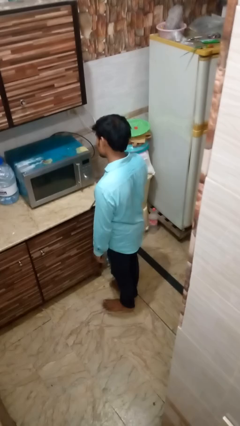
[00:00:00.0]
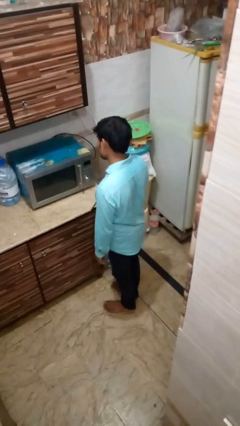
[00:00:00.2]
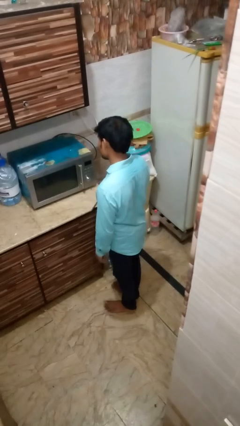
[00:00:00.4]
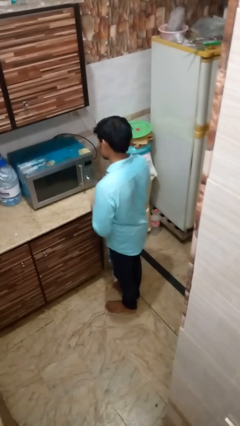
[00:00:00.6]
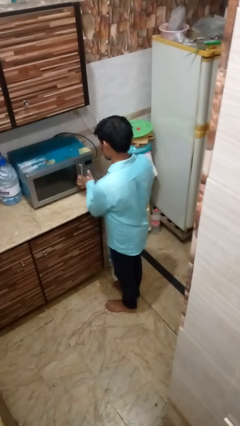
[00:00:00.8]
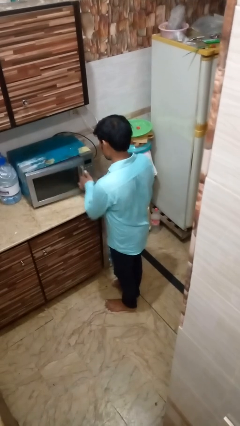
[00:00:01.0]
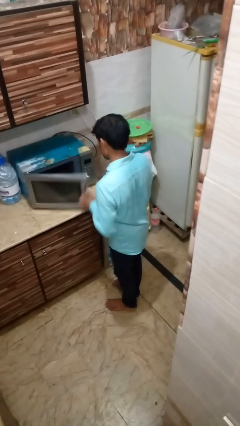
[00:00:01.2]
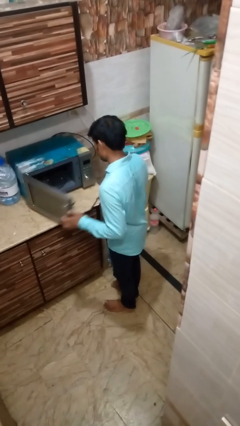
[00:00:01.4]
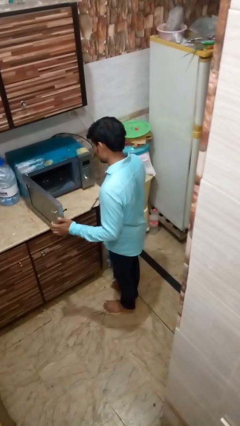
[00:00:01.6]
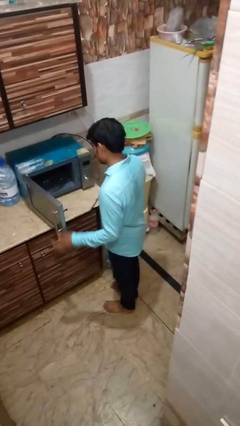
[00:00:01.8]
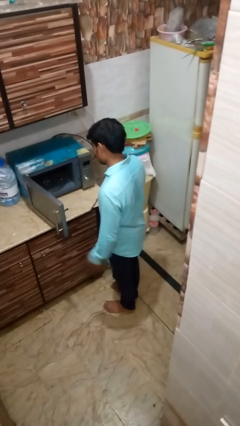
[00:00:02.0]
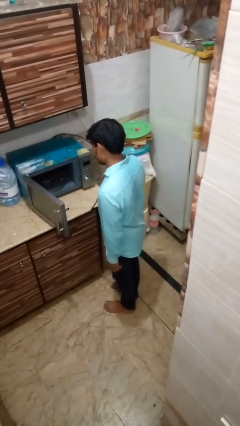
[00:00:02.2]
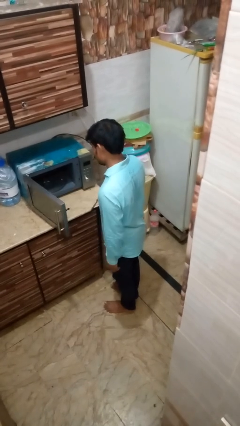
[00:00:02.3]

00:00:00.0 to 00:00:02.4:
person opens oven door

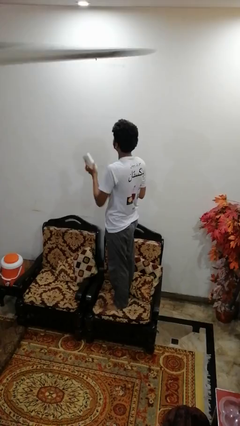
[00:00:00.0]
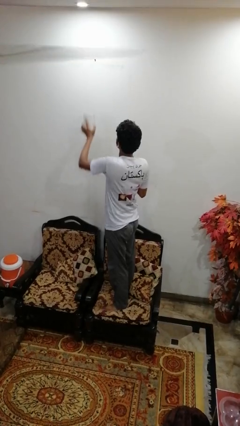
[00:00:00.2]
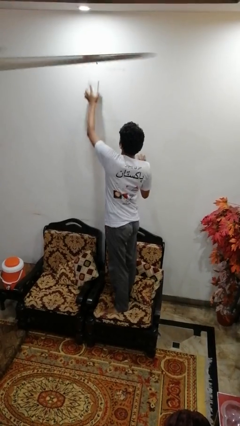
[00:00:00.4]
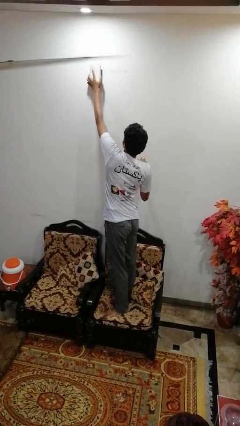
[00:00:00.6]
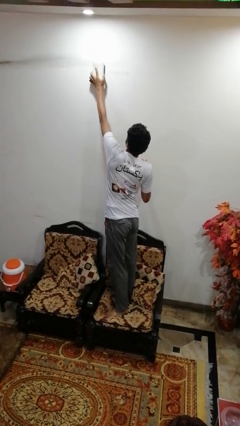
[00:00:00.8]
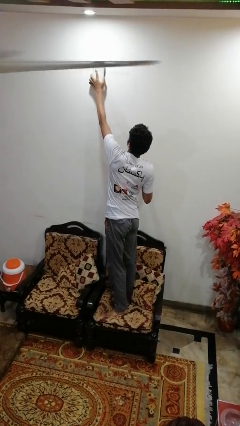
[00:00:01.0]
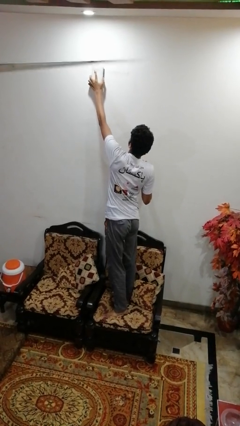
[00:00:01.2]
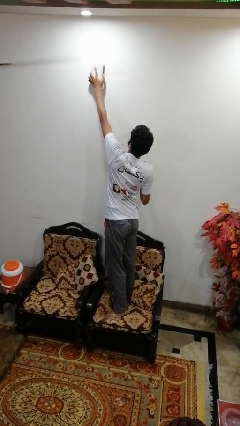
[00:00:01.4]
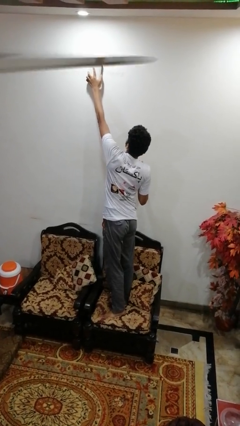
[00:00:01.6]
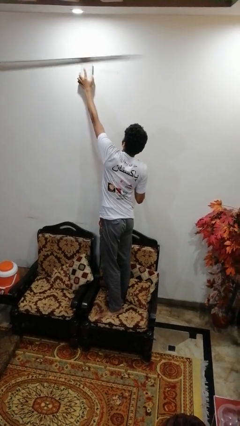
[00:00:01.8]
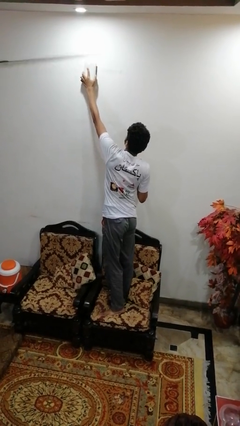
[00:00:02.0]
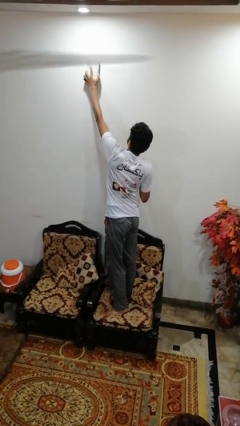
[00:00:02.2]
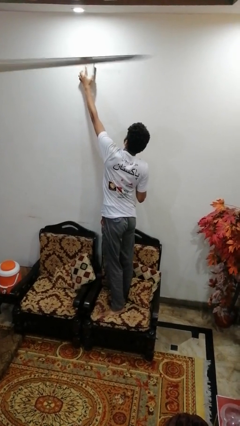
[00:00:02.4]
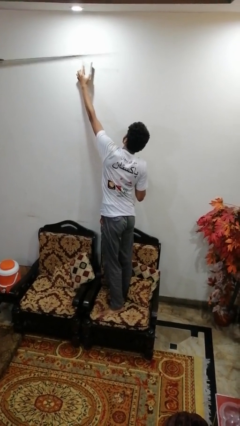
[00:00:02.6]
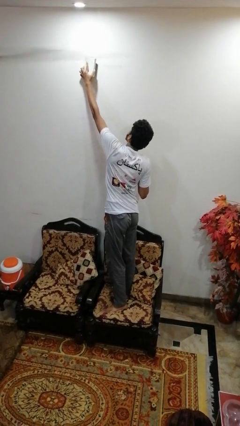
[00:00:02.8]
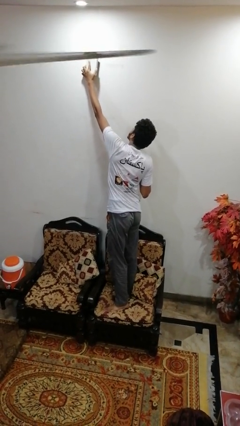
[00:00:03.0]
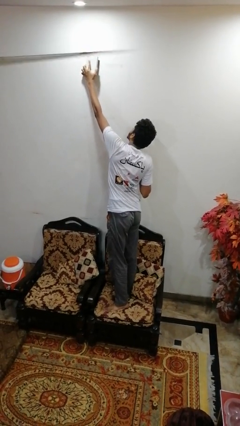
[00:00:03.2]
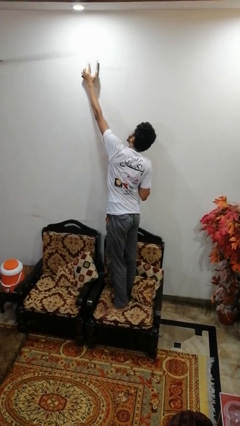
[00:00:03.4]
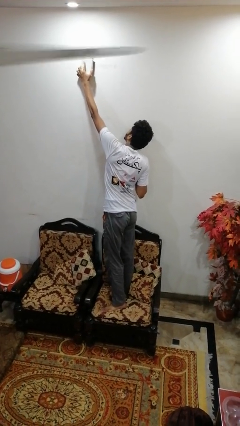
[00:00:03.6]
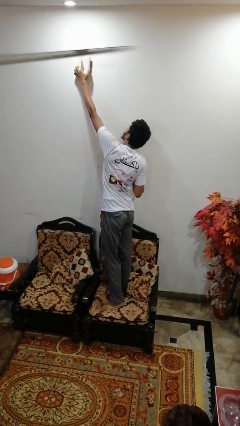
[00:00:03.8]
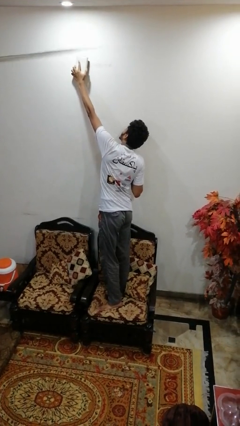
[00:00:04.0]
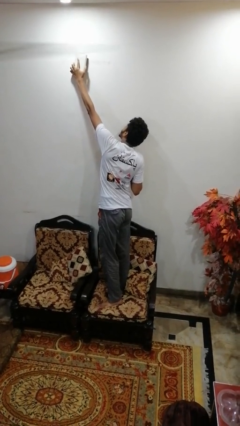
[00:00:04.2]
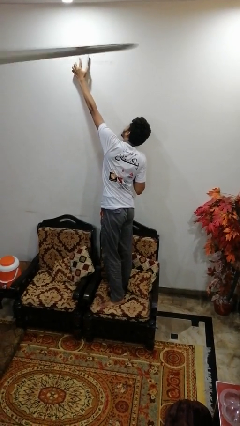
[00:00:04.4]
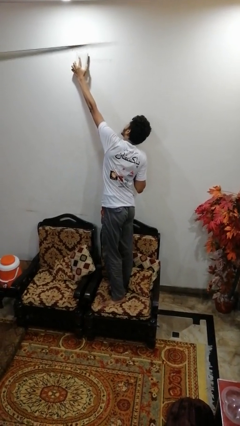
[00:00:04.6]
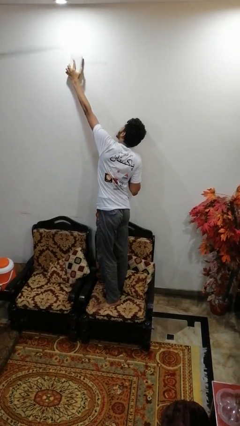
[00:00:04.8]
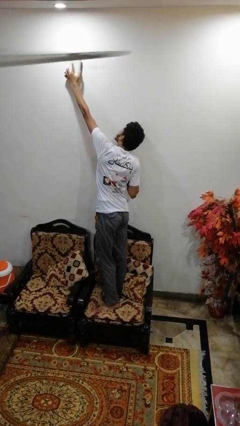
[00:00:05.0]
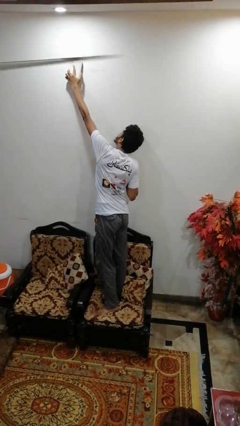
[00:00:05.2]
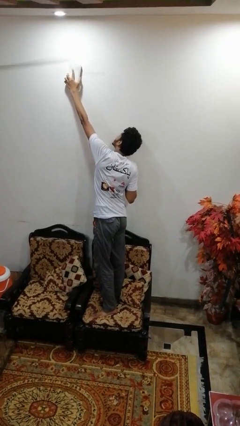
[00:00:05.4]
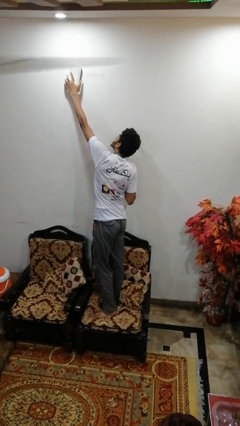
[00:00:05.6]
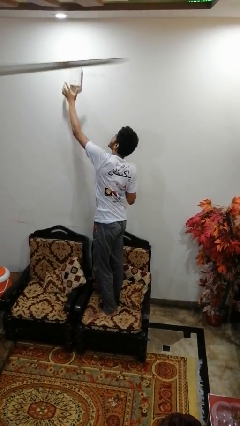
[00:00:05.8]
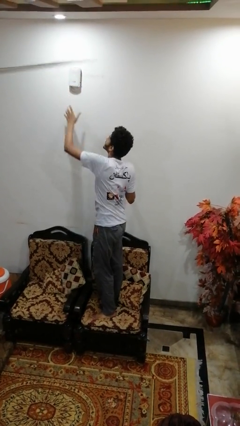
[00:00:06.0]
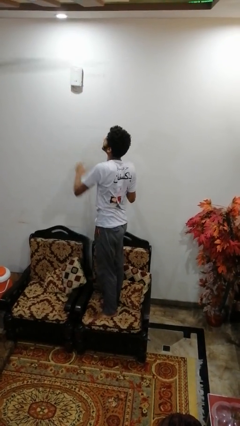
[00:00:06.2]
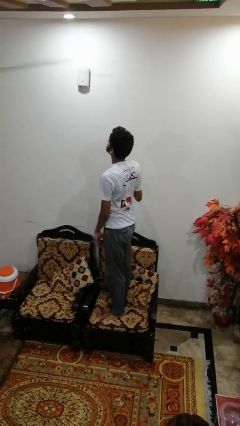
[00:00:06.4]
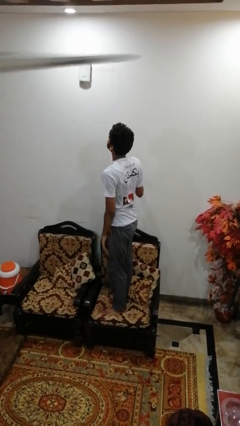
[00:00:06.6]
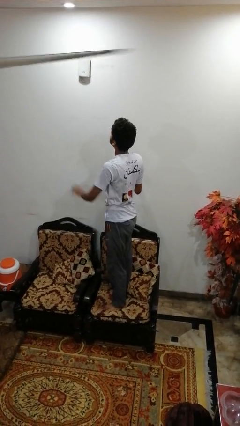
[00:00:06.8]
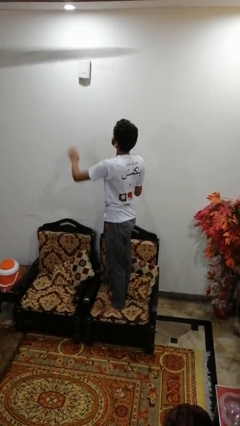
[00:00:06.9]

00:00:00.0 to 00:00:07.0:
person puts up smoke detector

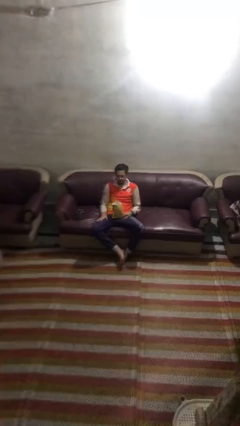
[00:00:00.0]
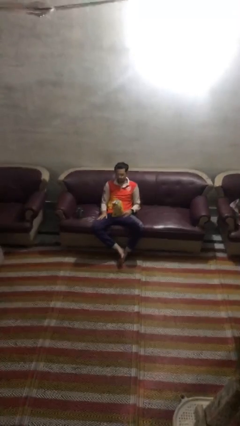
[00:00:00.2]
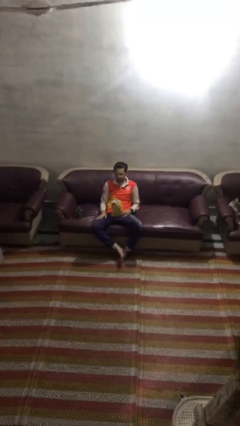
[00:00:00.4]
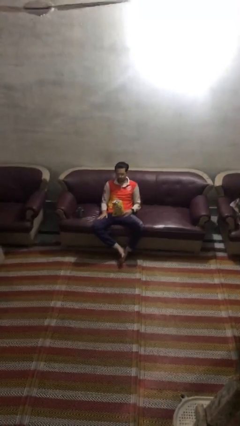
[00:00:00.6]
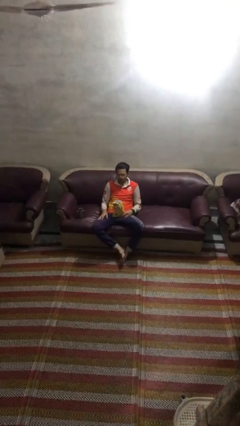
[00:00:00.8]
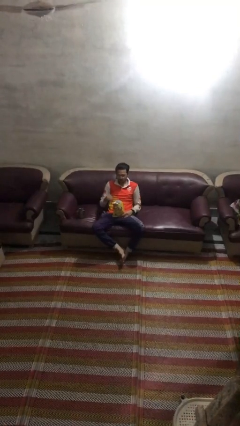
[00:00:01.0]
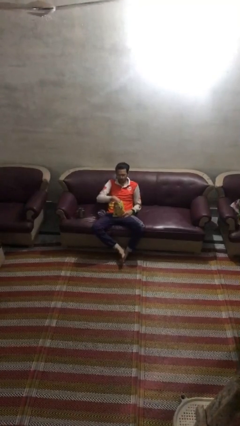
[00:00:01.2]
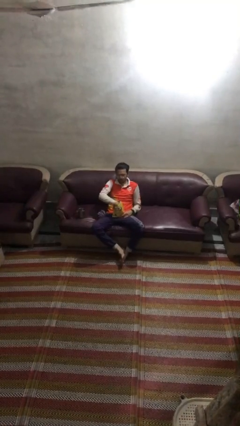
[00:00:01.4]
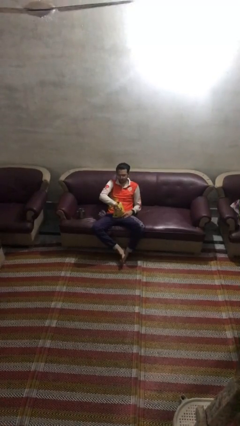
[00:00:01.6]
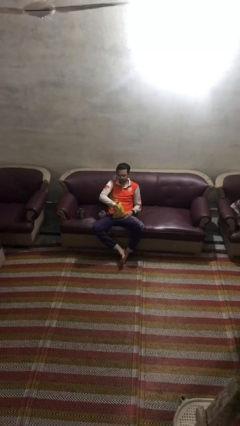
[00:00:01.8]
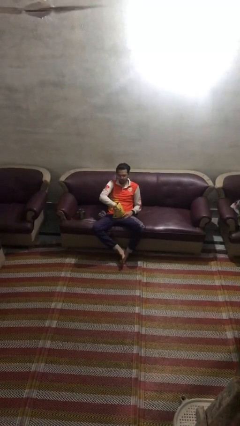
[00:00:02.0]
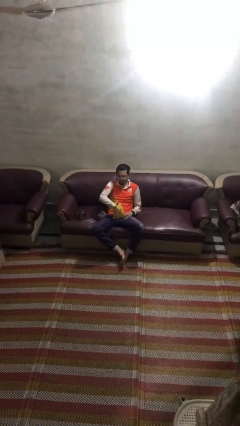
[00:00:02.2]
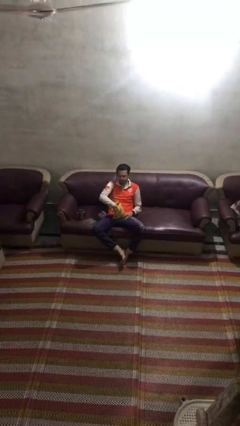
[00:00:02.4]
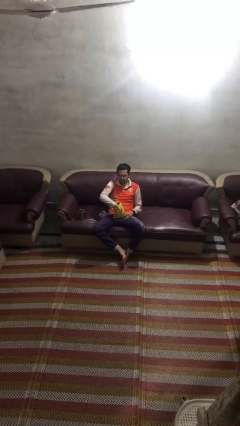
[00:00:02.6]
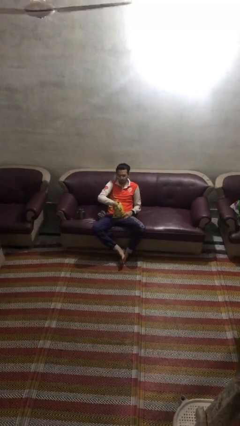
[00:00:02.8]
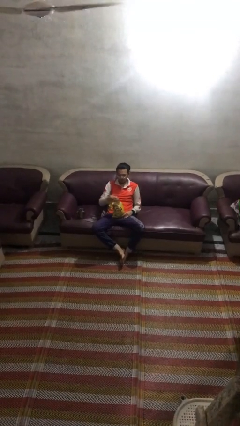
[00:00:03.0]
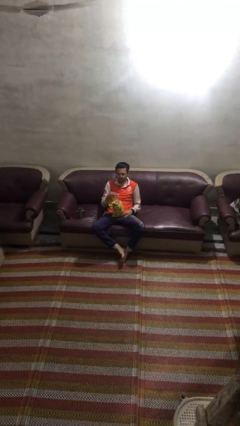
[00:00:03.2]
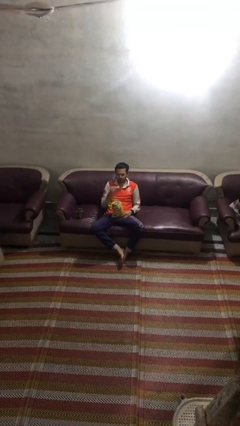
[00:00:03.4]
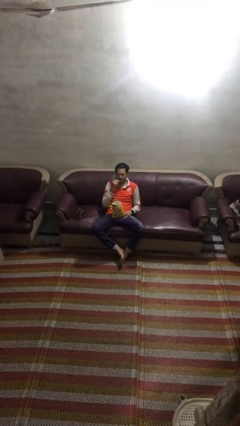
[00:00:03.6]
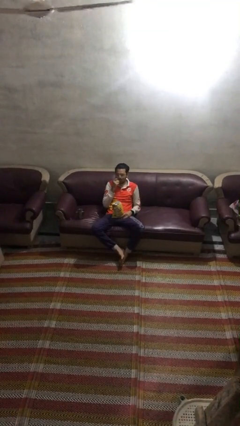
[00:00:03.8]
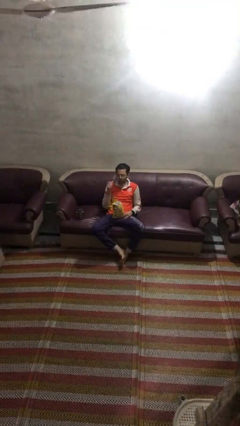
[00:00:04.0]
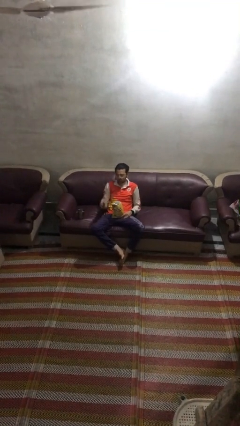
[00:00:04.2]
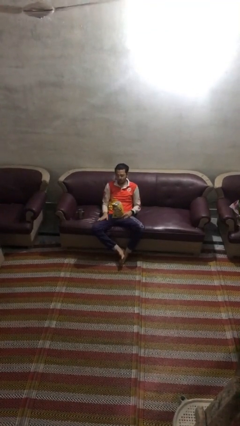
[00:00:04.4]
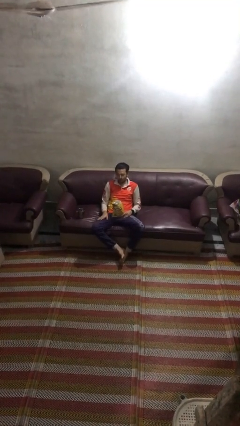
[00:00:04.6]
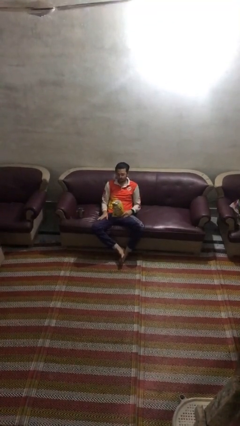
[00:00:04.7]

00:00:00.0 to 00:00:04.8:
person eats snack from bag

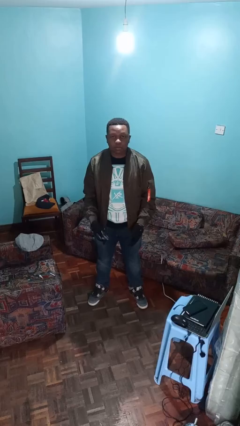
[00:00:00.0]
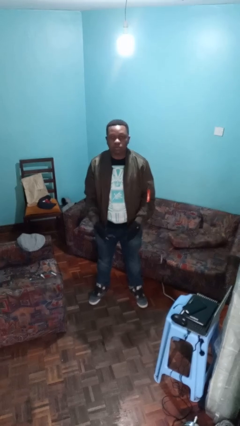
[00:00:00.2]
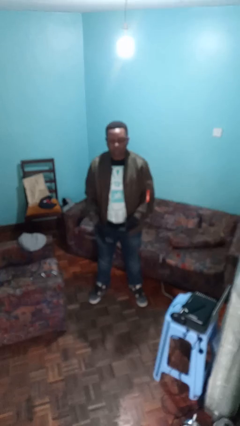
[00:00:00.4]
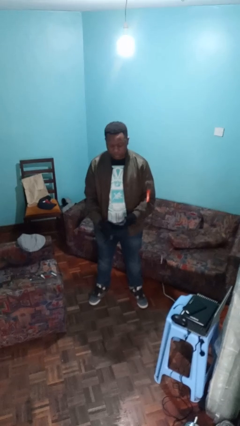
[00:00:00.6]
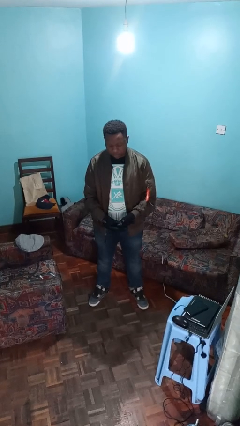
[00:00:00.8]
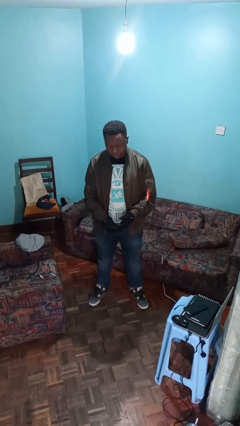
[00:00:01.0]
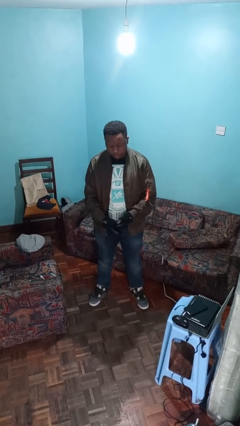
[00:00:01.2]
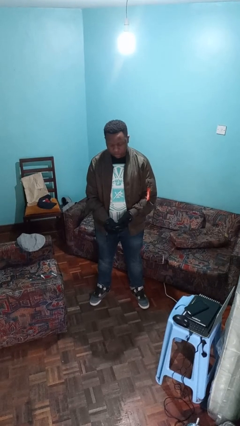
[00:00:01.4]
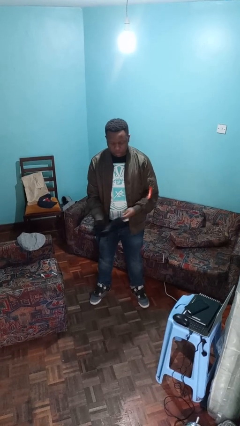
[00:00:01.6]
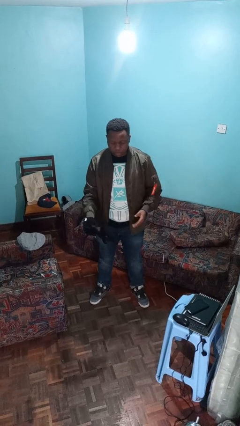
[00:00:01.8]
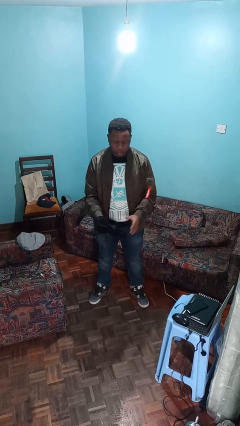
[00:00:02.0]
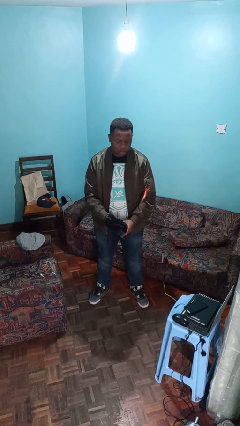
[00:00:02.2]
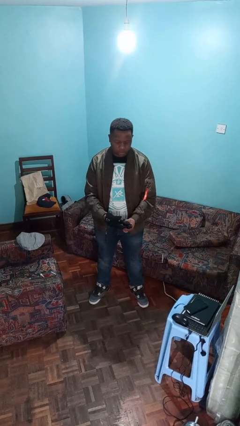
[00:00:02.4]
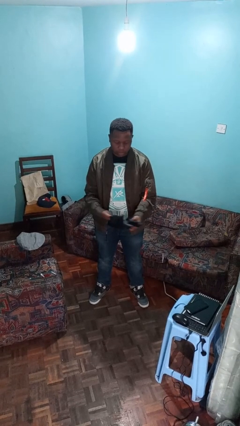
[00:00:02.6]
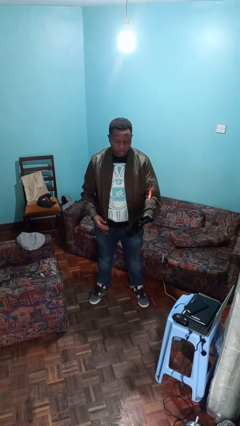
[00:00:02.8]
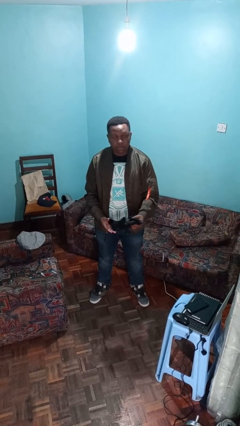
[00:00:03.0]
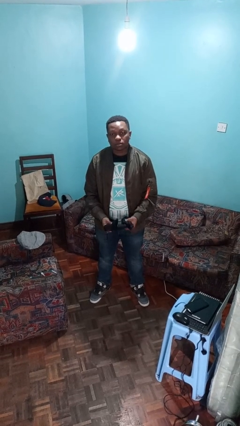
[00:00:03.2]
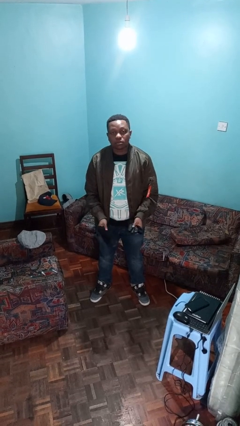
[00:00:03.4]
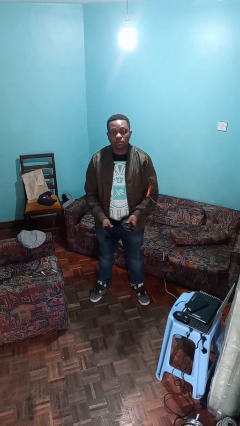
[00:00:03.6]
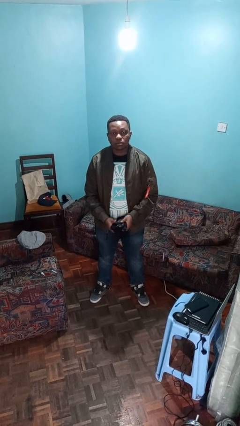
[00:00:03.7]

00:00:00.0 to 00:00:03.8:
person takes off gloves
